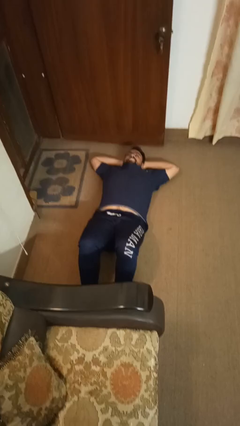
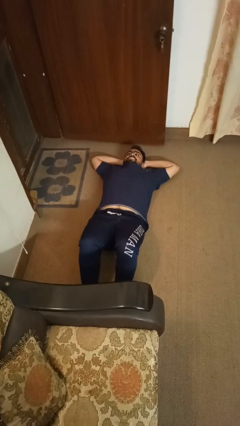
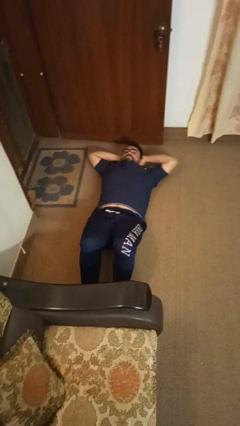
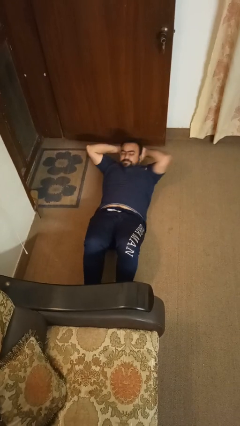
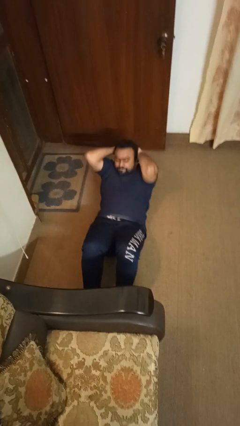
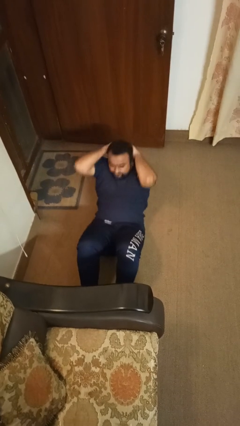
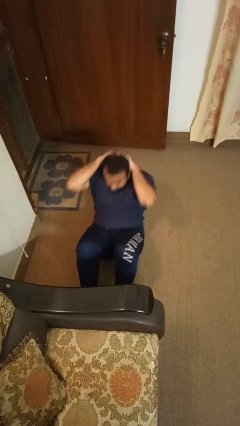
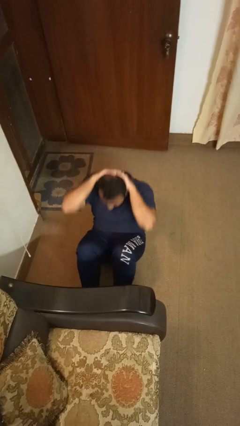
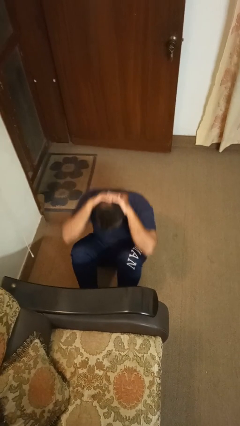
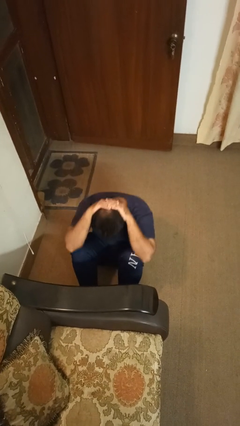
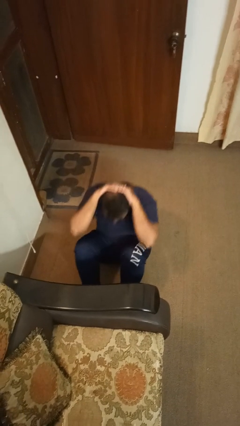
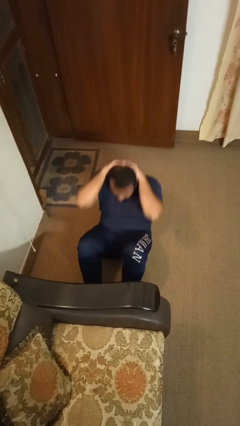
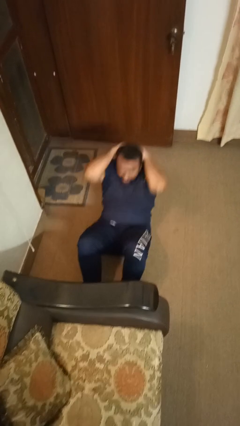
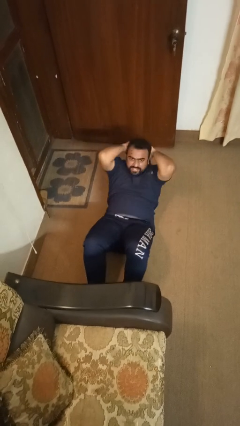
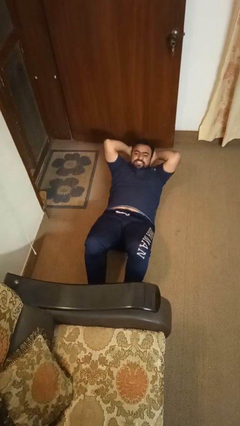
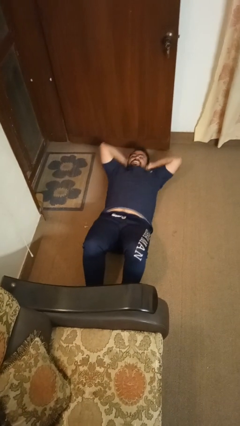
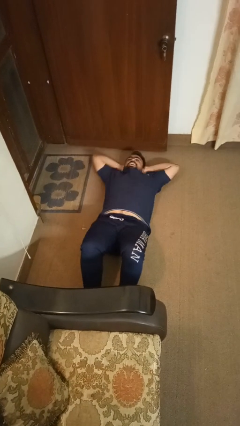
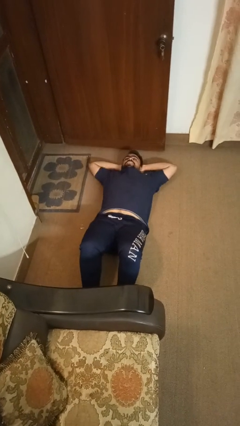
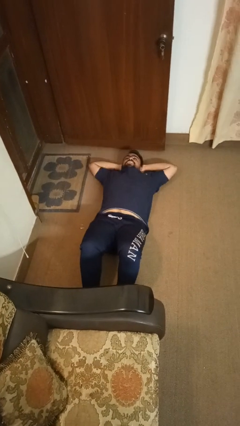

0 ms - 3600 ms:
person exercises with situp

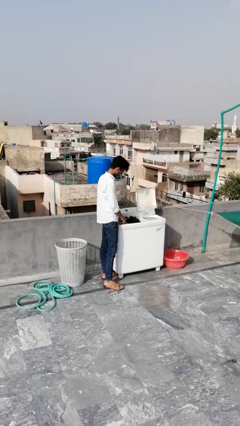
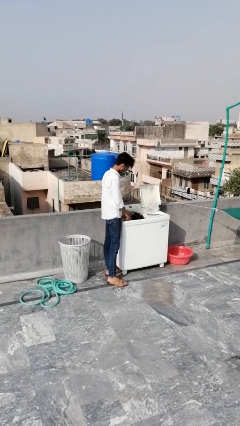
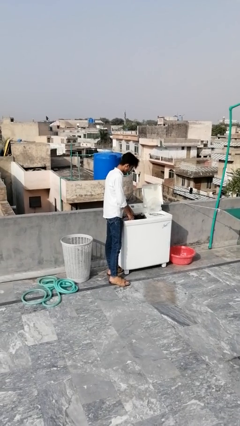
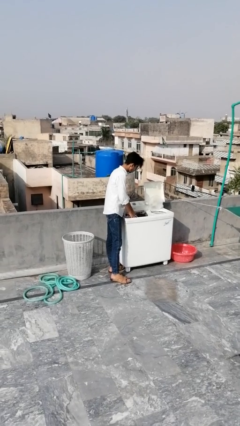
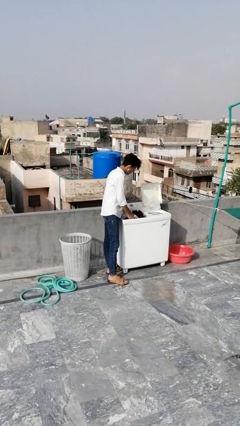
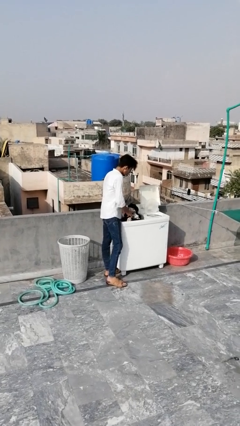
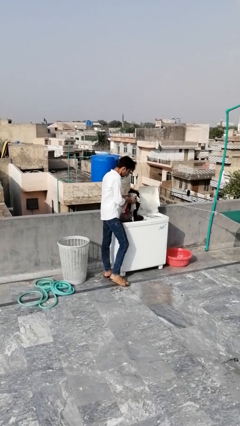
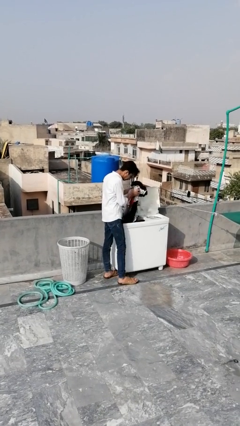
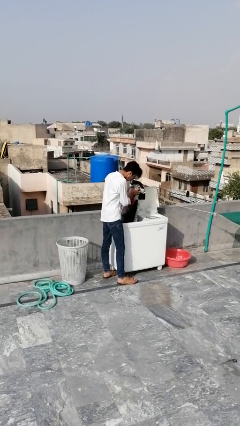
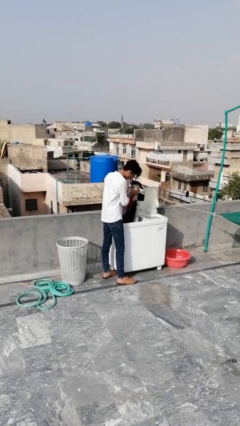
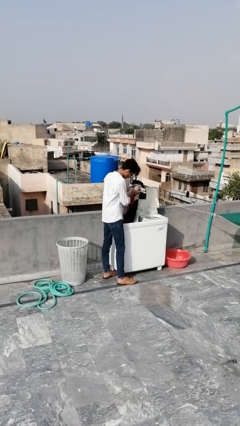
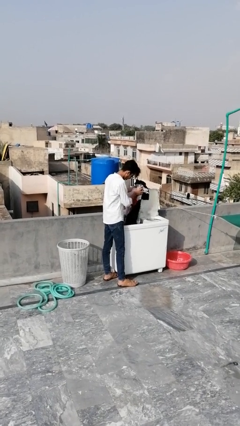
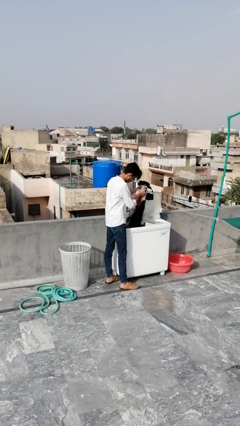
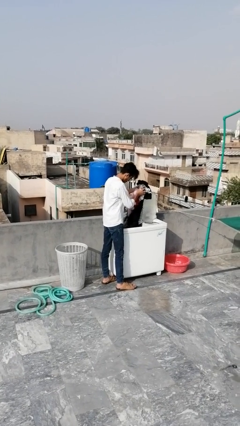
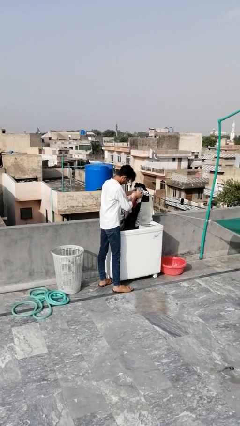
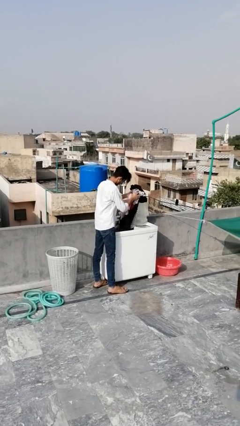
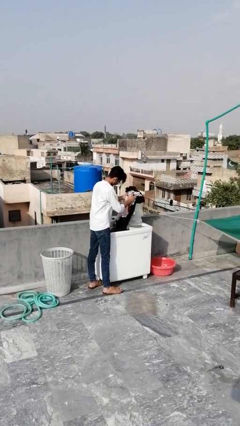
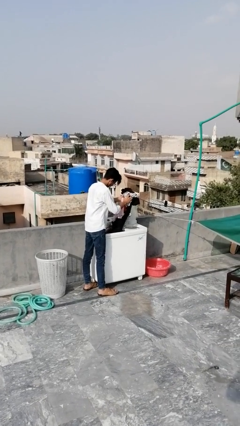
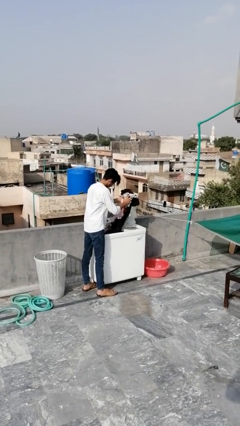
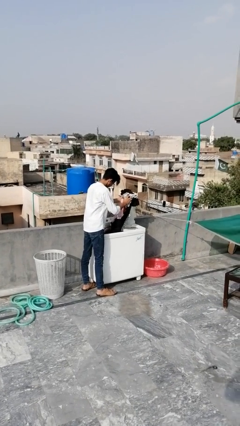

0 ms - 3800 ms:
person unloads clotheswasher

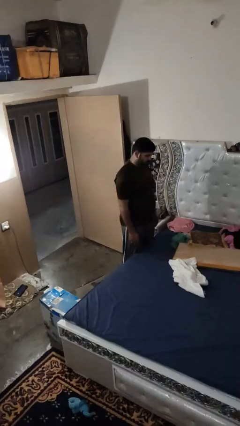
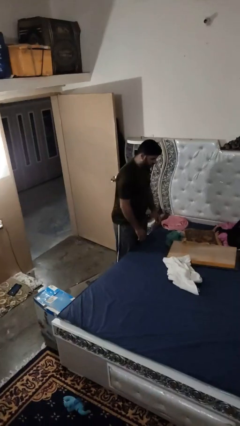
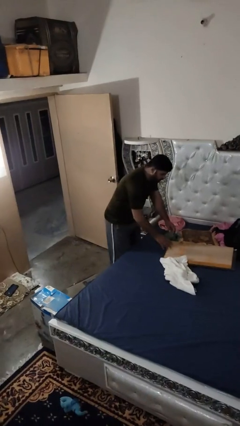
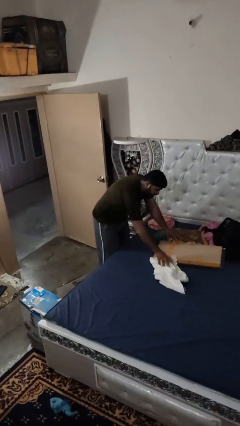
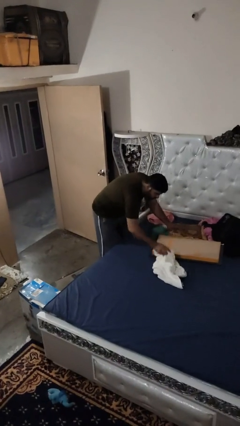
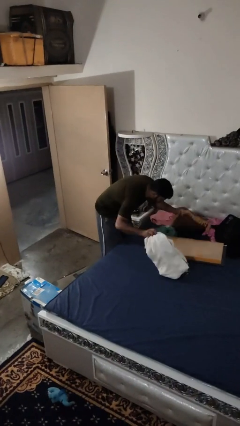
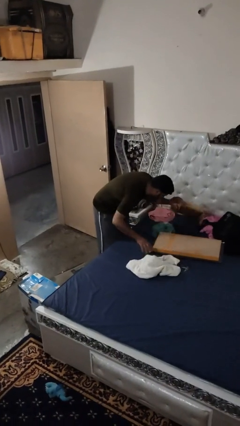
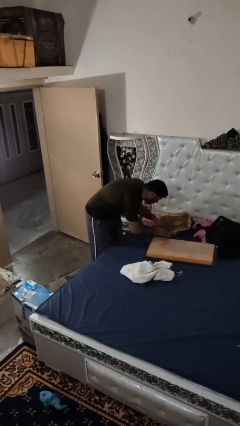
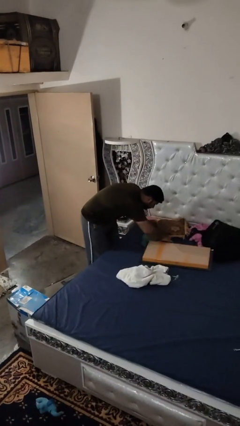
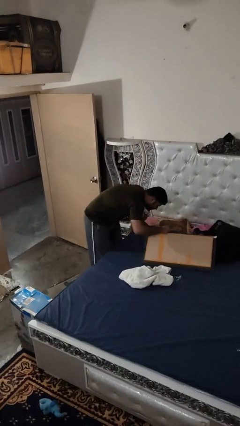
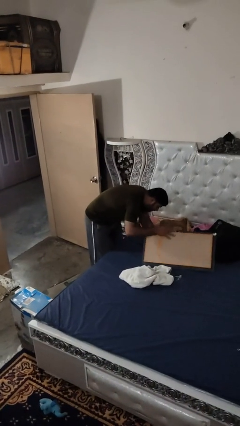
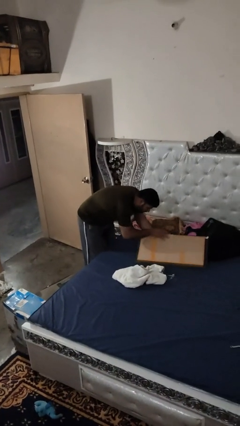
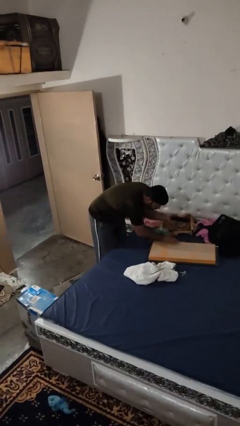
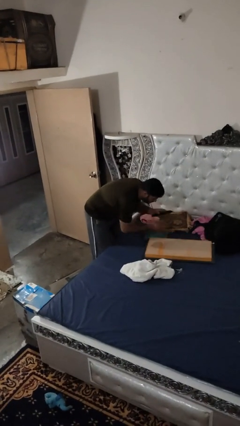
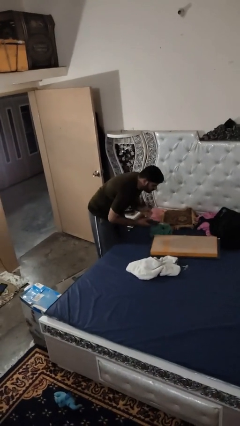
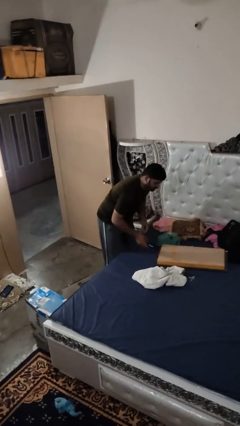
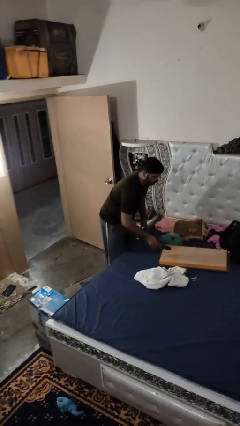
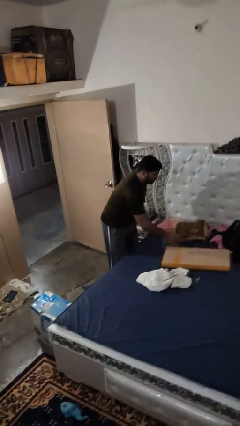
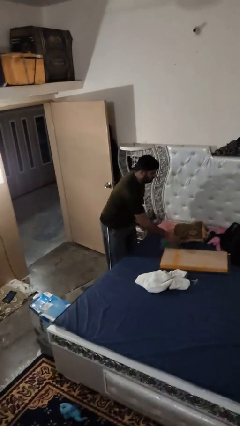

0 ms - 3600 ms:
person searches under bed

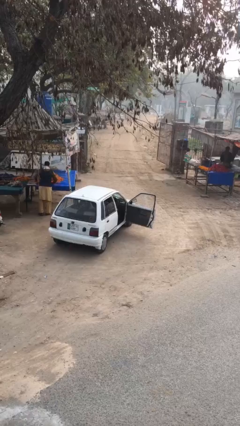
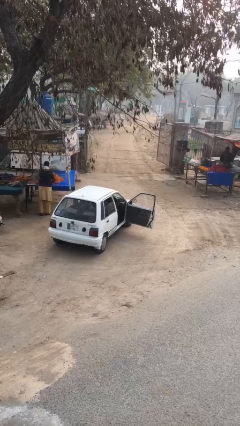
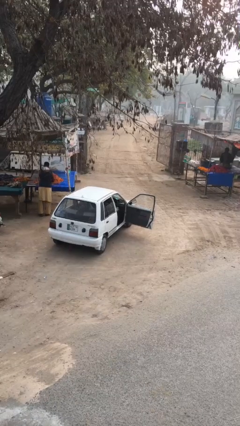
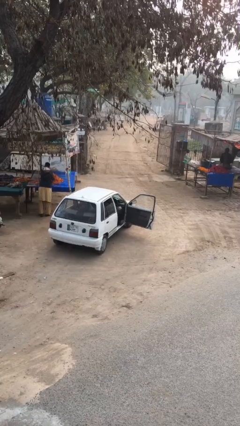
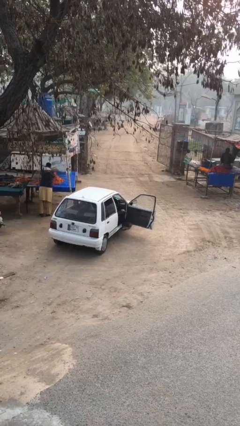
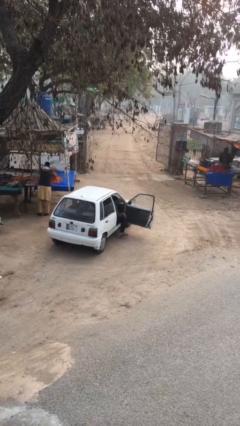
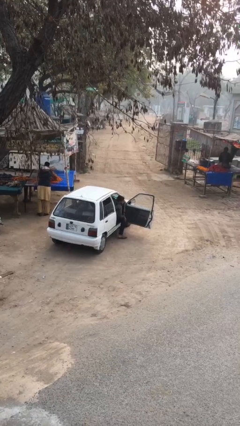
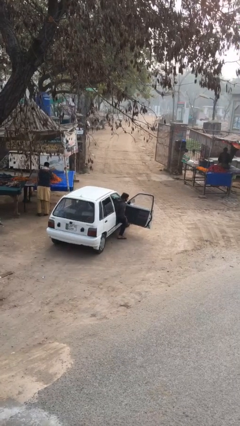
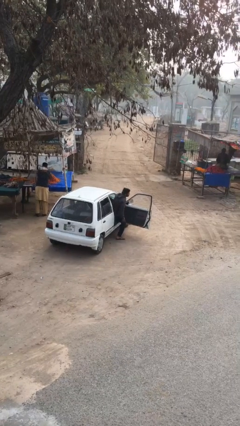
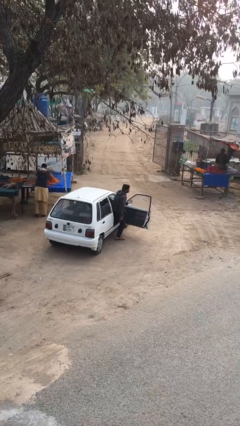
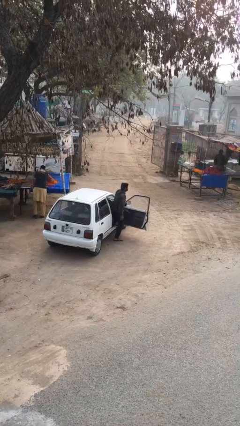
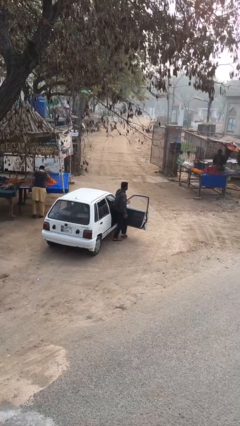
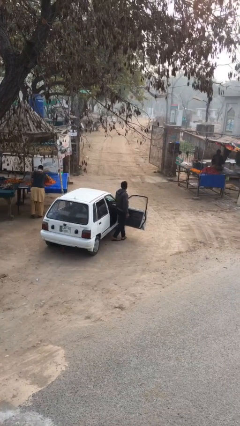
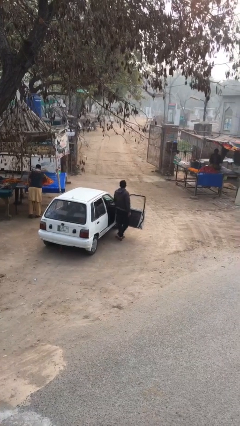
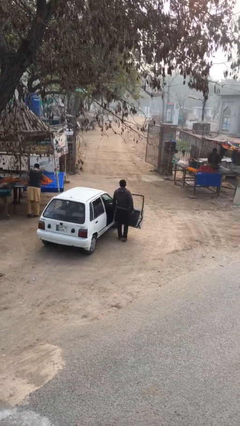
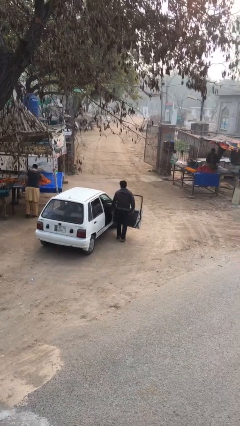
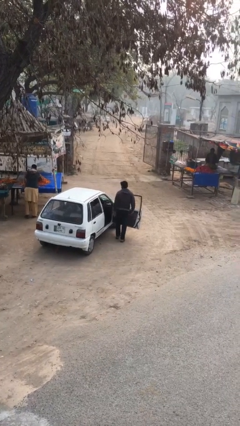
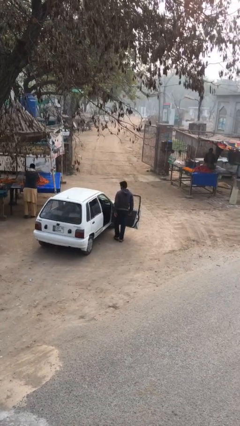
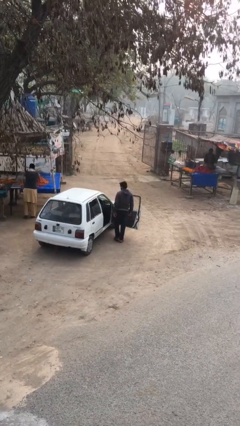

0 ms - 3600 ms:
person exits car

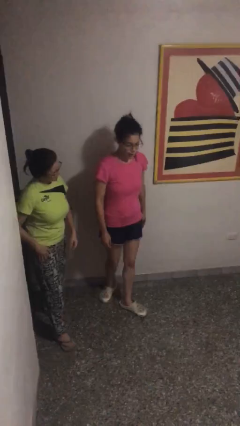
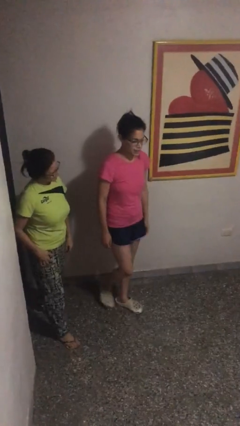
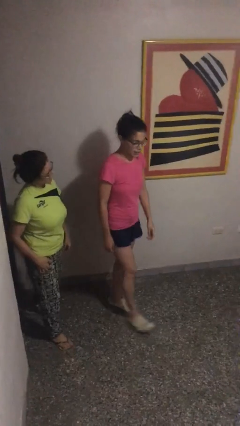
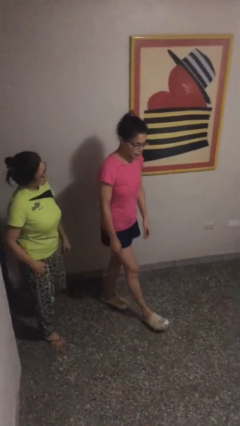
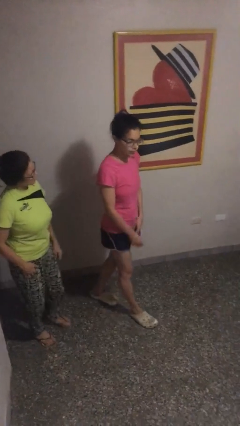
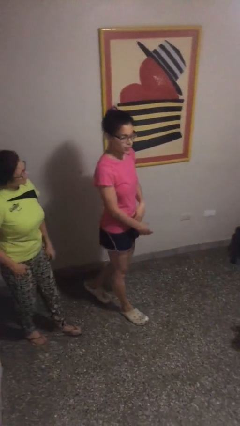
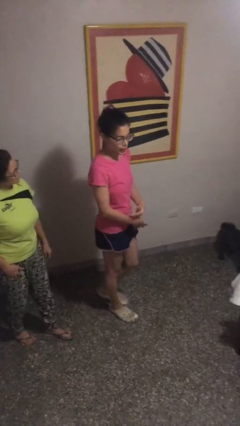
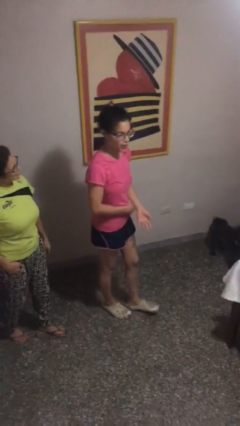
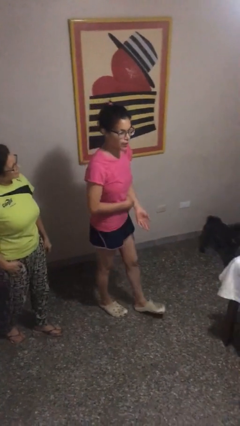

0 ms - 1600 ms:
person talks to person

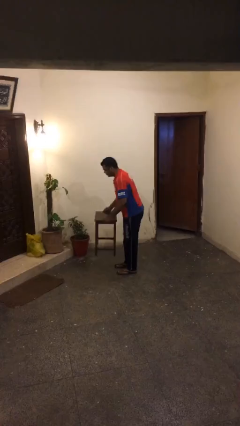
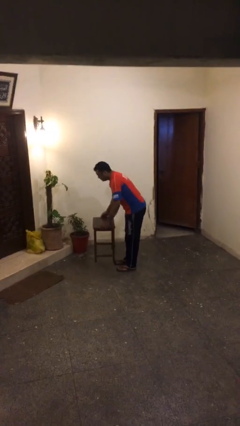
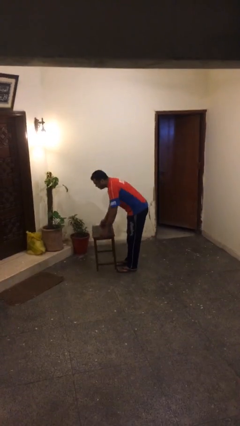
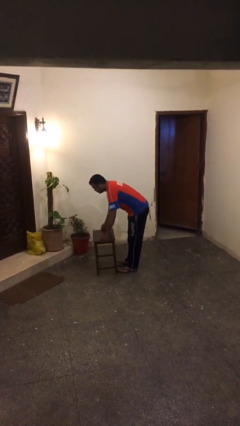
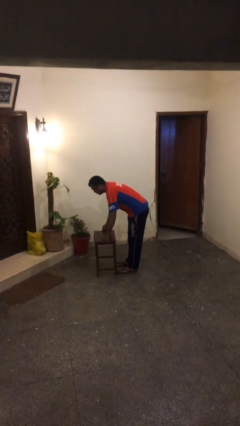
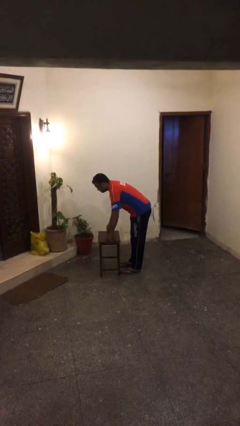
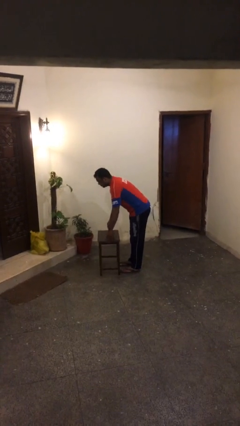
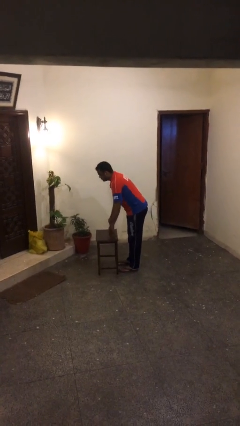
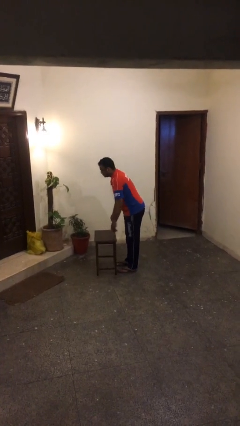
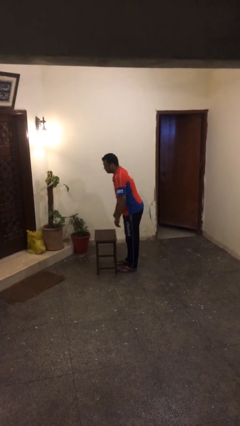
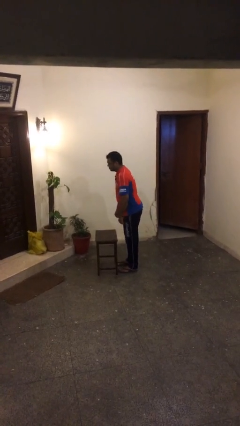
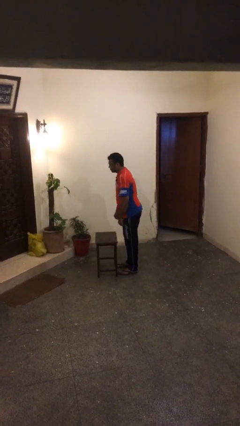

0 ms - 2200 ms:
person puts down object on floor
